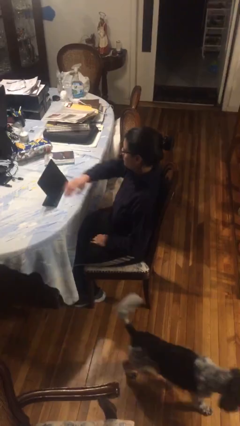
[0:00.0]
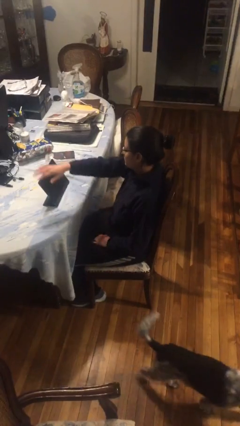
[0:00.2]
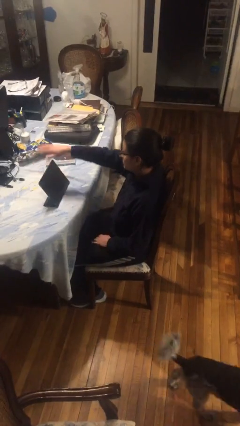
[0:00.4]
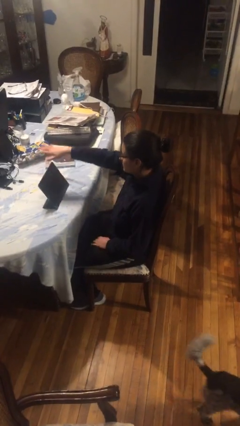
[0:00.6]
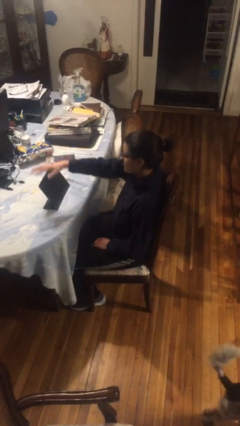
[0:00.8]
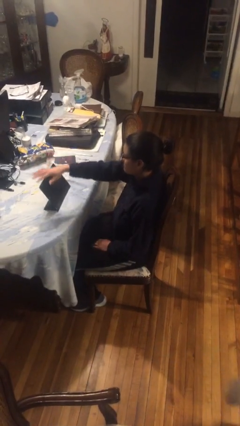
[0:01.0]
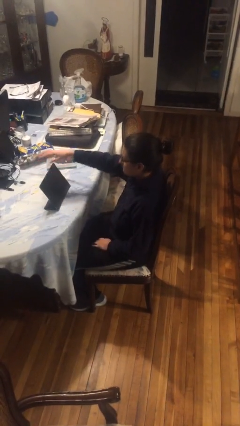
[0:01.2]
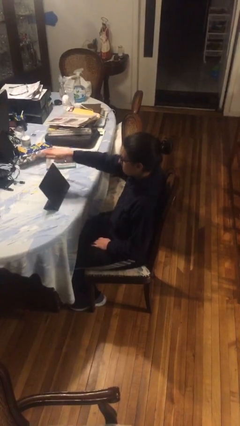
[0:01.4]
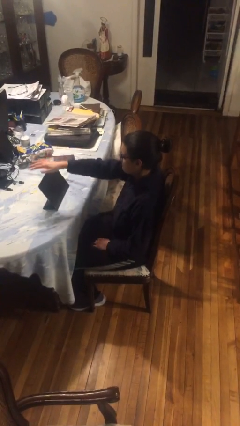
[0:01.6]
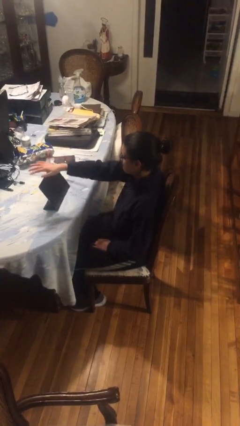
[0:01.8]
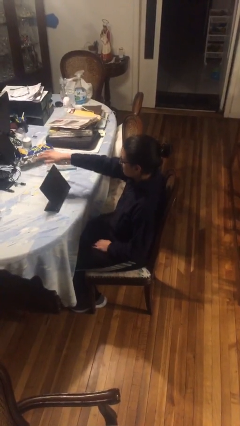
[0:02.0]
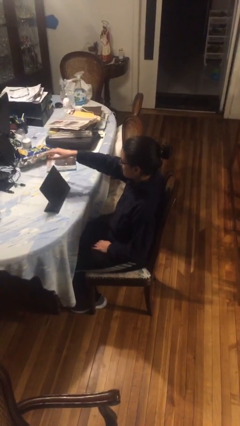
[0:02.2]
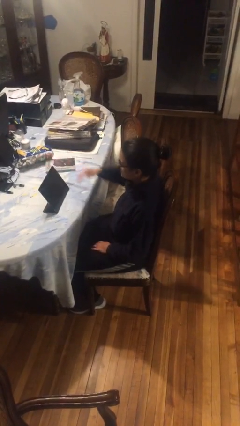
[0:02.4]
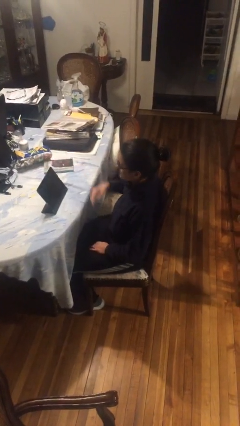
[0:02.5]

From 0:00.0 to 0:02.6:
person waves hand over object

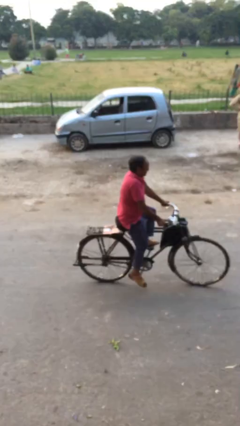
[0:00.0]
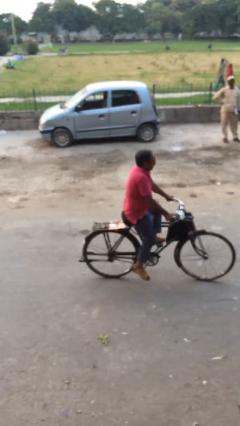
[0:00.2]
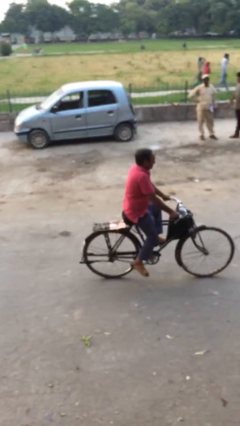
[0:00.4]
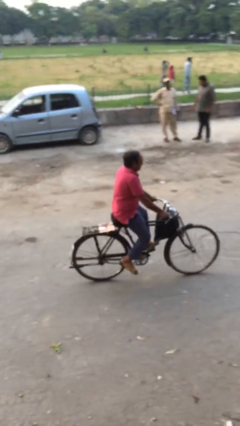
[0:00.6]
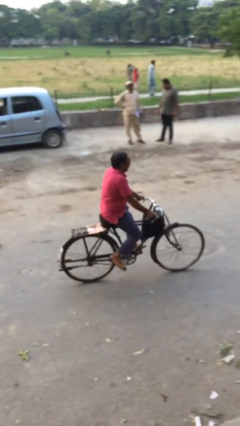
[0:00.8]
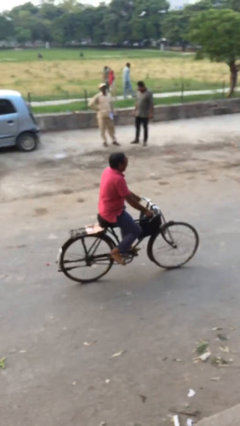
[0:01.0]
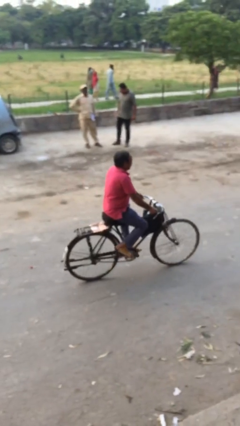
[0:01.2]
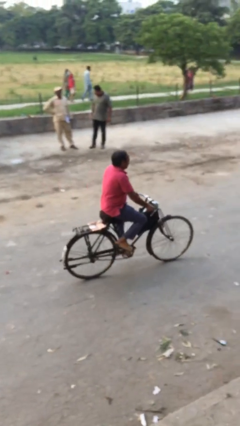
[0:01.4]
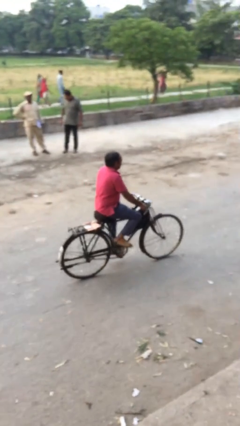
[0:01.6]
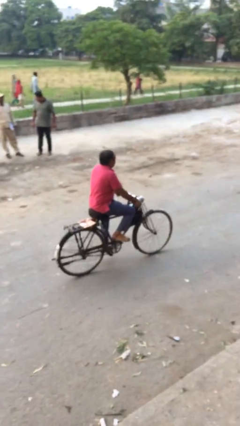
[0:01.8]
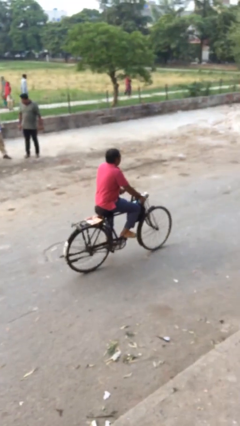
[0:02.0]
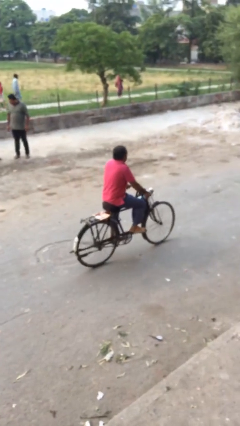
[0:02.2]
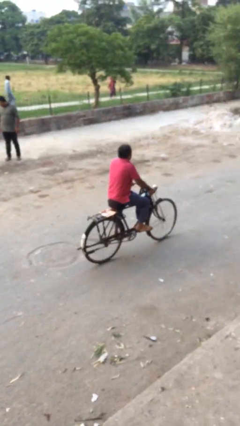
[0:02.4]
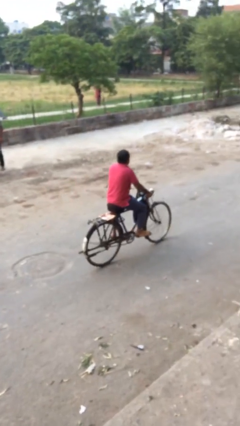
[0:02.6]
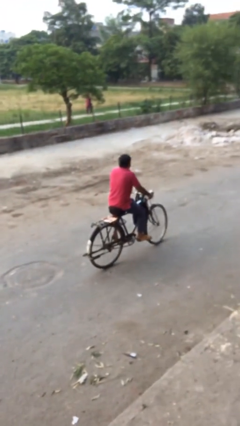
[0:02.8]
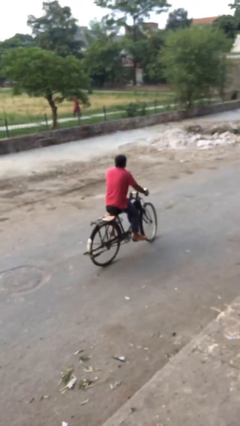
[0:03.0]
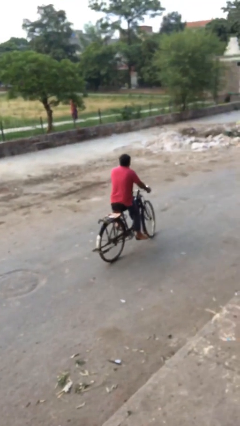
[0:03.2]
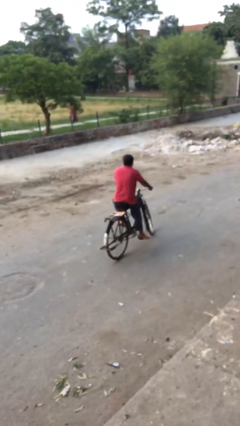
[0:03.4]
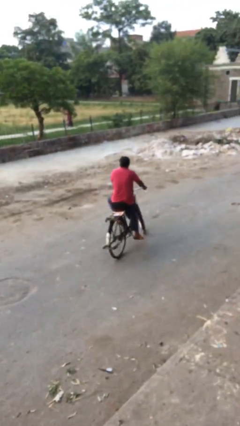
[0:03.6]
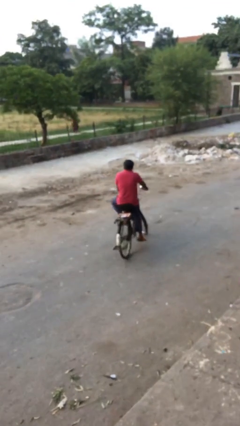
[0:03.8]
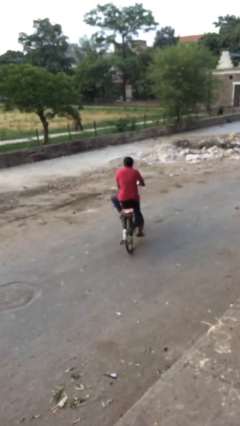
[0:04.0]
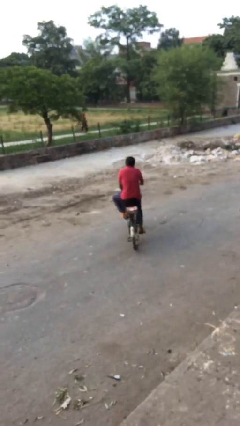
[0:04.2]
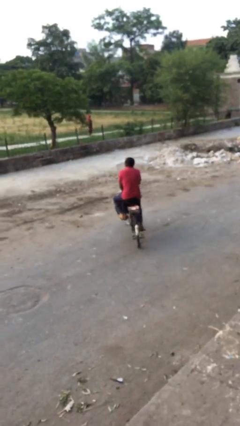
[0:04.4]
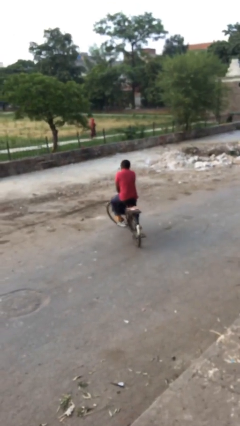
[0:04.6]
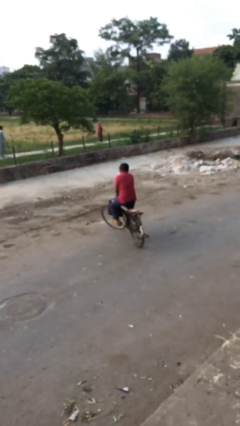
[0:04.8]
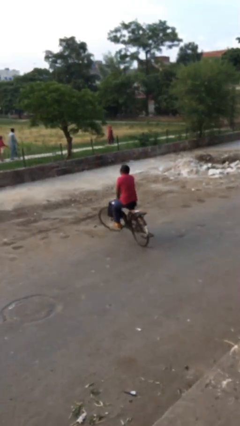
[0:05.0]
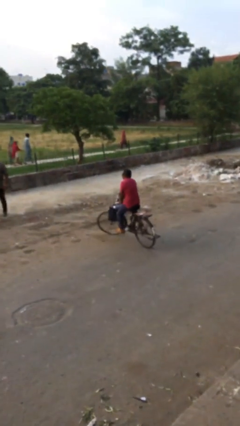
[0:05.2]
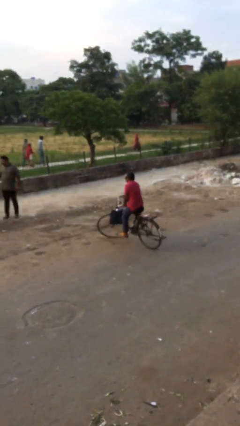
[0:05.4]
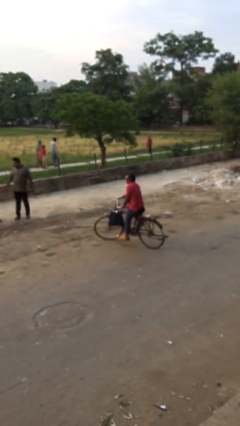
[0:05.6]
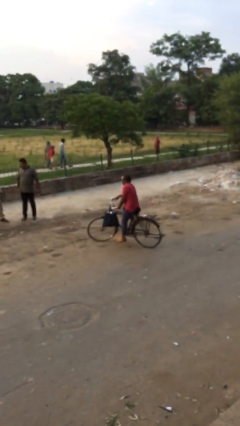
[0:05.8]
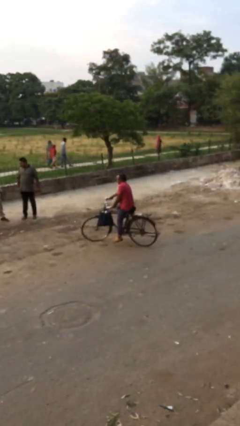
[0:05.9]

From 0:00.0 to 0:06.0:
person rides bicycle

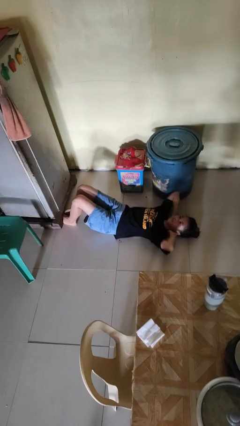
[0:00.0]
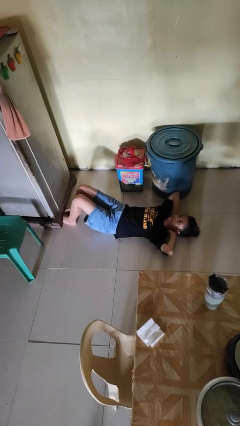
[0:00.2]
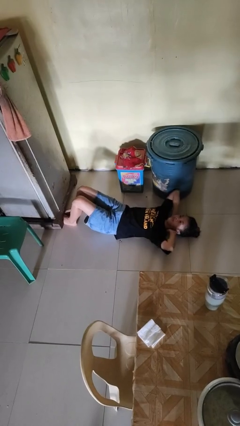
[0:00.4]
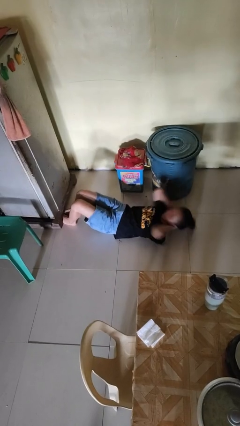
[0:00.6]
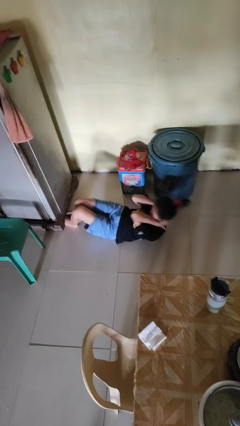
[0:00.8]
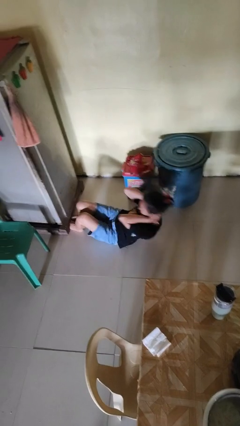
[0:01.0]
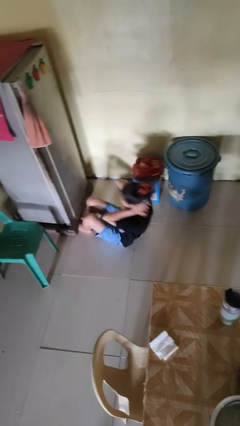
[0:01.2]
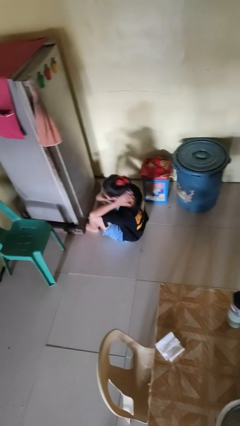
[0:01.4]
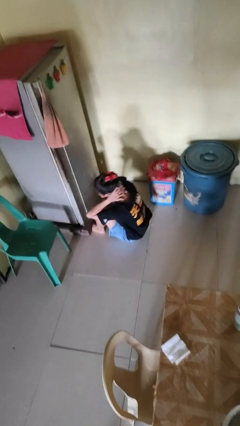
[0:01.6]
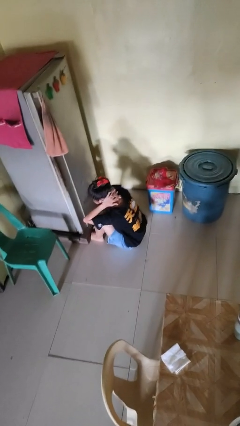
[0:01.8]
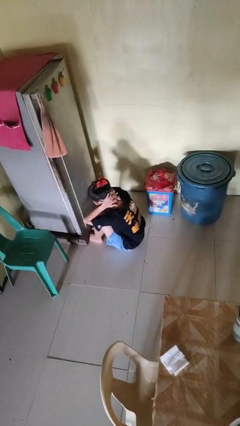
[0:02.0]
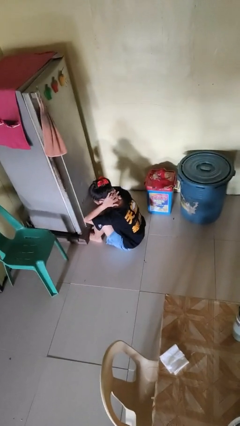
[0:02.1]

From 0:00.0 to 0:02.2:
person exercises with situp

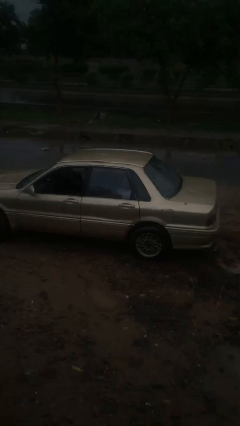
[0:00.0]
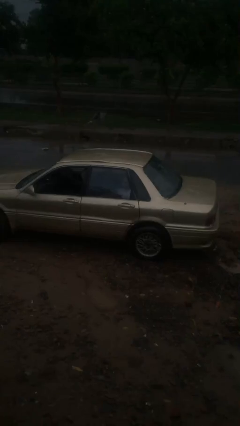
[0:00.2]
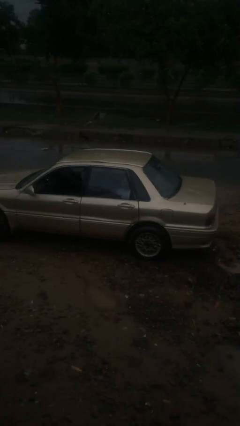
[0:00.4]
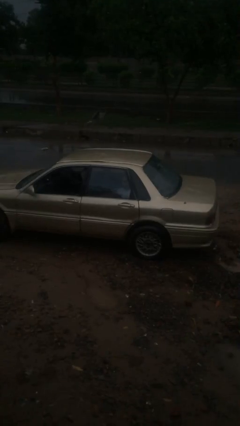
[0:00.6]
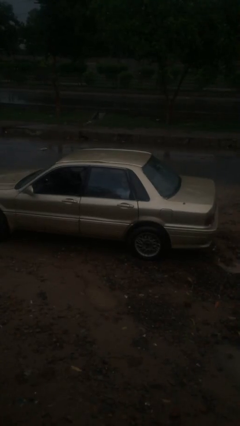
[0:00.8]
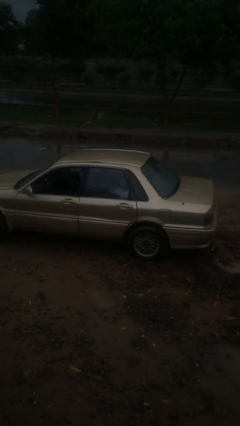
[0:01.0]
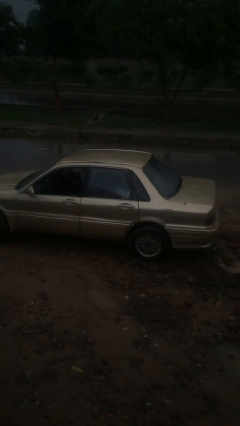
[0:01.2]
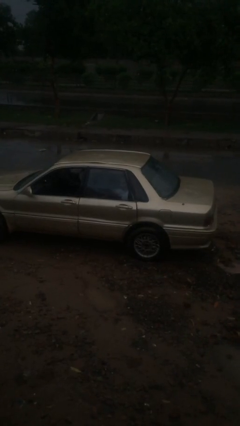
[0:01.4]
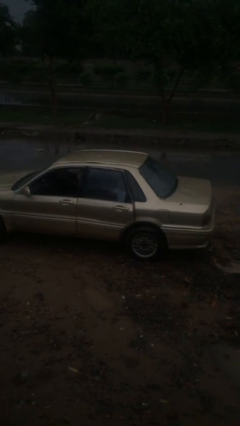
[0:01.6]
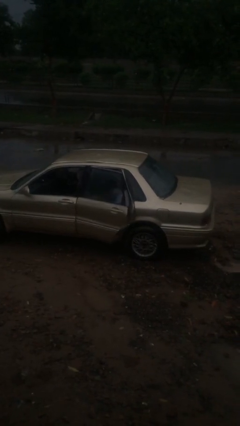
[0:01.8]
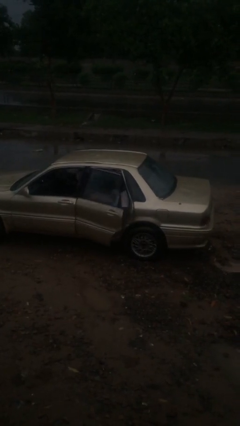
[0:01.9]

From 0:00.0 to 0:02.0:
person opens car door

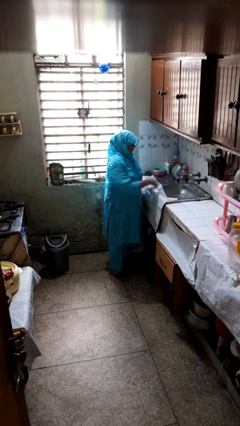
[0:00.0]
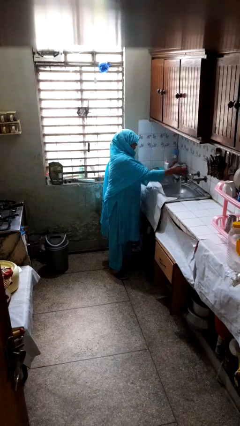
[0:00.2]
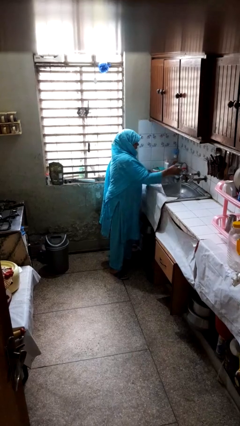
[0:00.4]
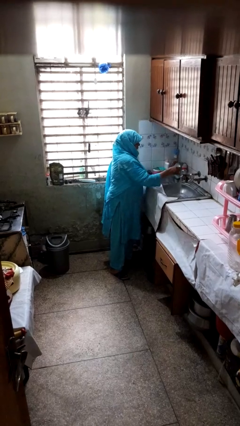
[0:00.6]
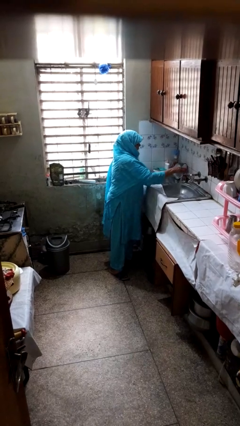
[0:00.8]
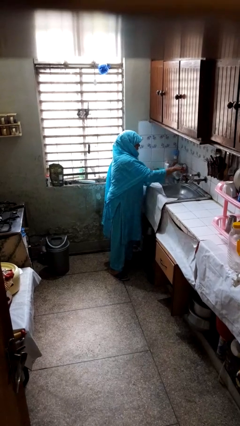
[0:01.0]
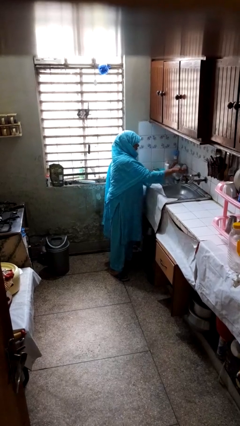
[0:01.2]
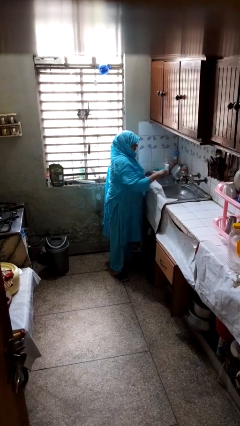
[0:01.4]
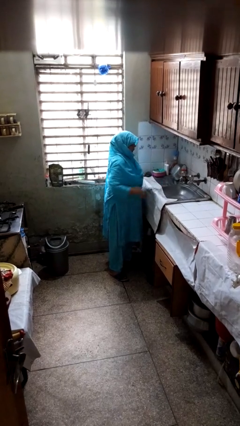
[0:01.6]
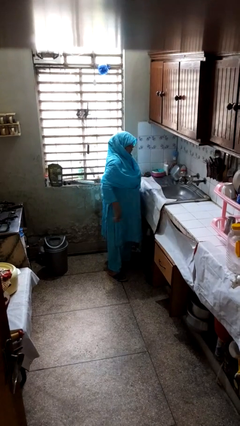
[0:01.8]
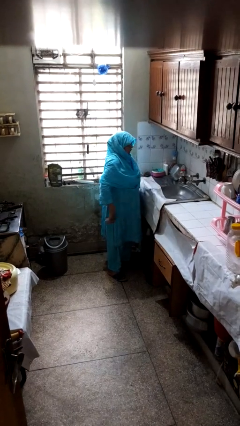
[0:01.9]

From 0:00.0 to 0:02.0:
person turns off faucet

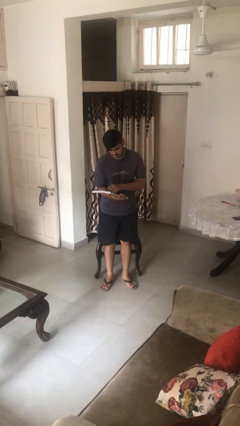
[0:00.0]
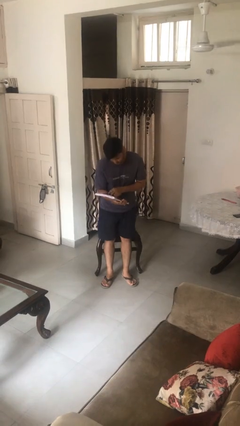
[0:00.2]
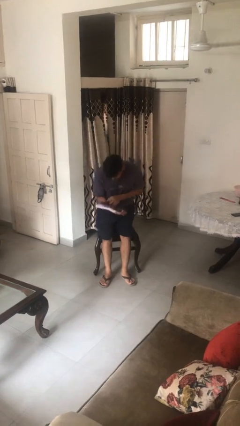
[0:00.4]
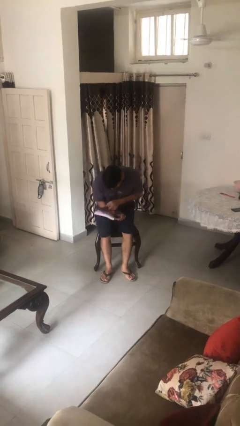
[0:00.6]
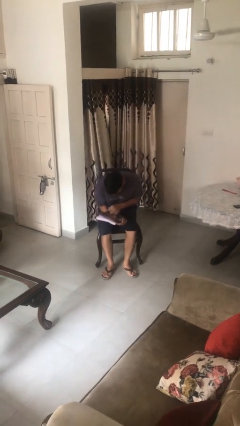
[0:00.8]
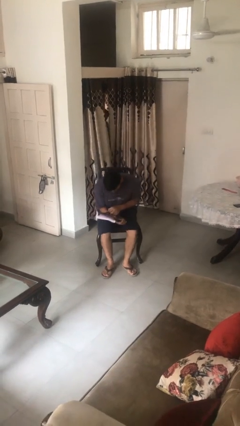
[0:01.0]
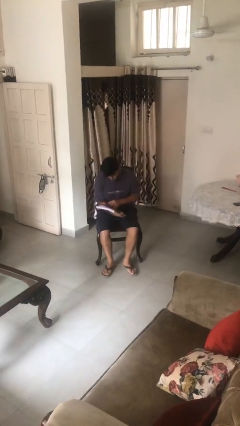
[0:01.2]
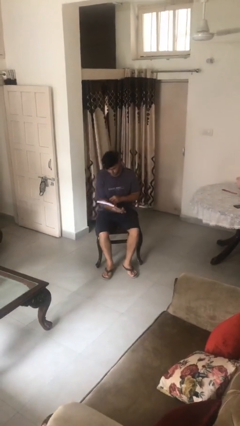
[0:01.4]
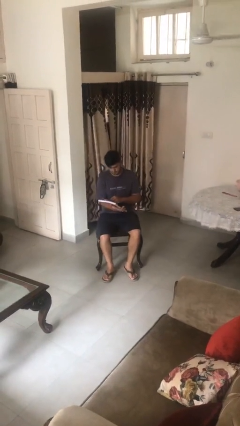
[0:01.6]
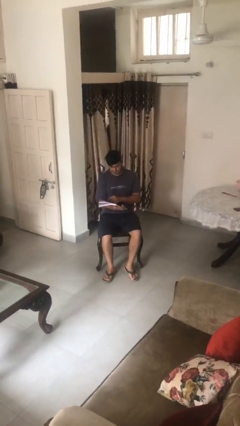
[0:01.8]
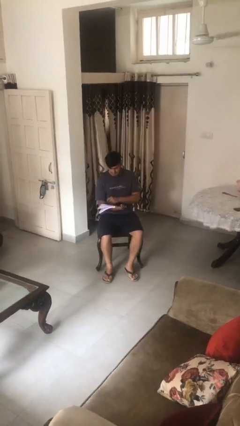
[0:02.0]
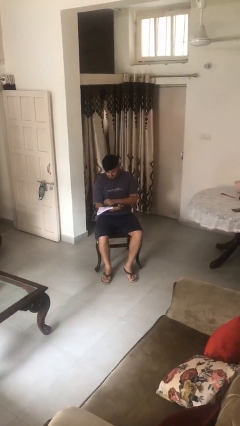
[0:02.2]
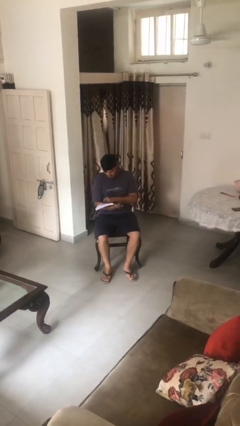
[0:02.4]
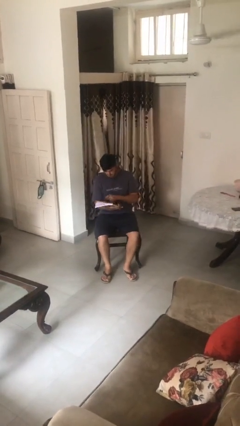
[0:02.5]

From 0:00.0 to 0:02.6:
person sits down
